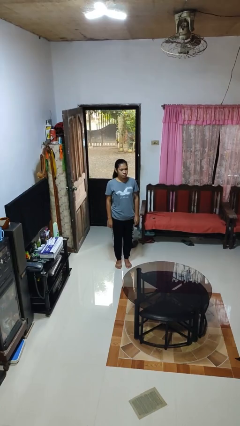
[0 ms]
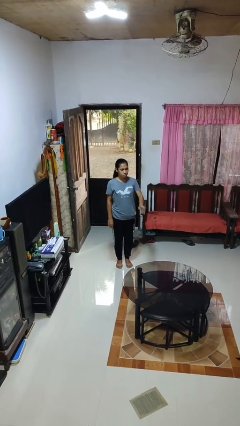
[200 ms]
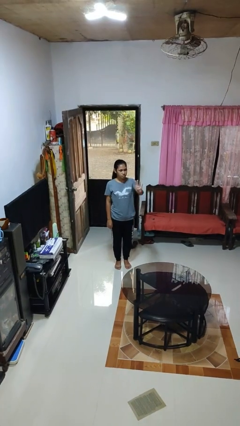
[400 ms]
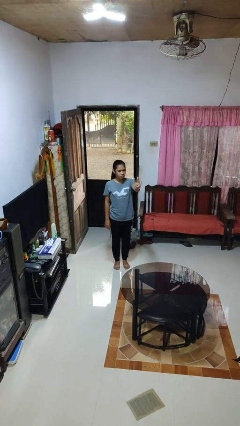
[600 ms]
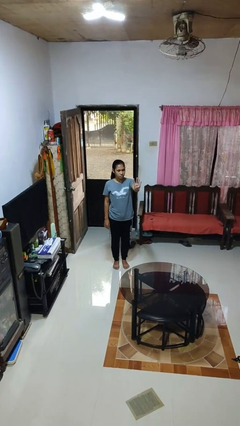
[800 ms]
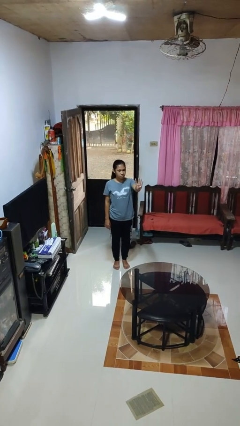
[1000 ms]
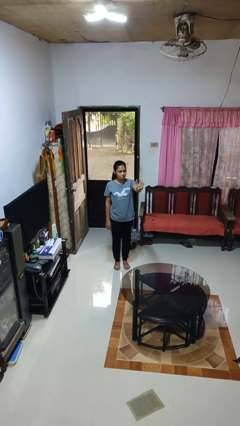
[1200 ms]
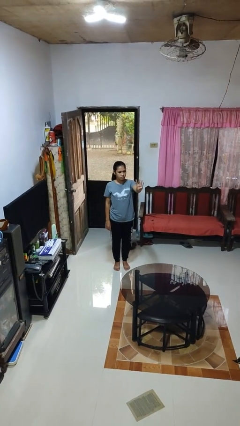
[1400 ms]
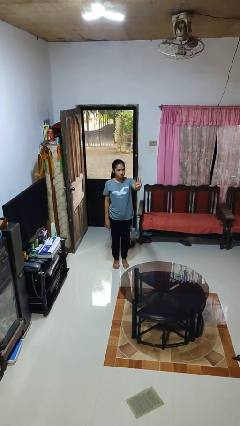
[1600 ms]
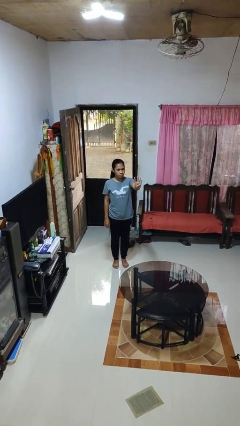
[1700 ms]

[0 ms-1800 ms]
person gestures number four

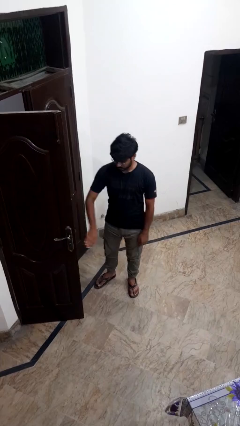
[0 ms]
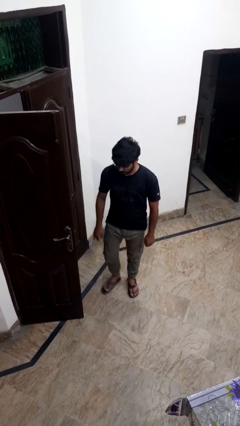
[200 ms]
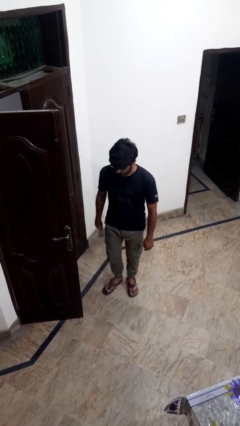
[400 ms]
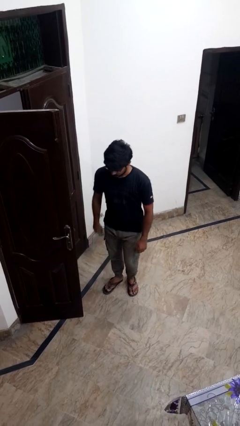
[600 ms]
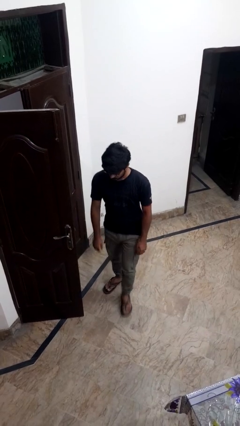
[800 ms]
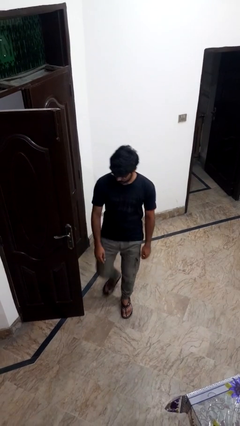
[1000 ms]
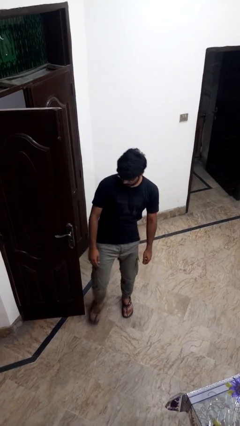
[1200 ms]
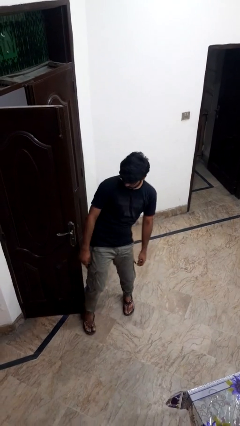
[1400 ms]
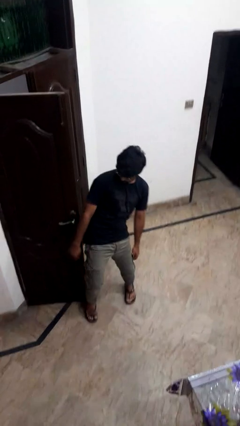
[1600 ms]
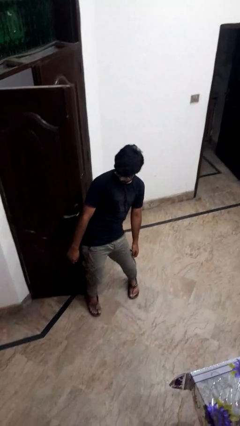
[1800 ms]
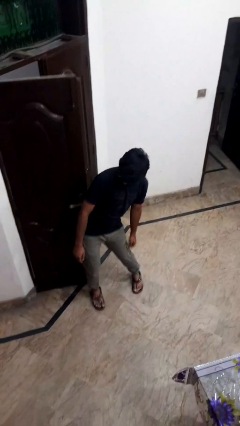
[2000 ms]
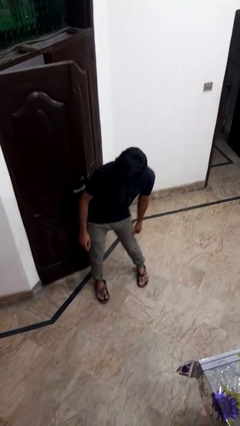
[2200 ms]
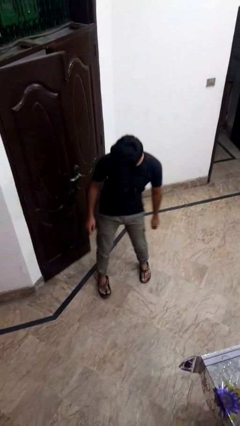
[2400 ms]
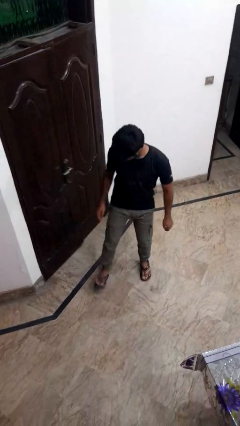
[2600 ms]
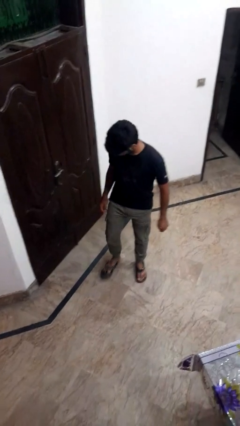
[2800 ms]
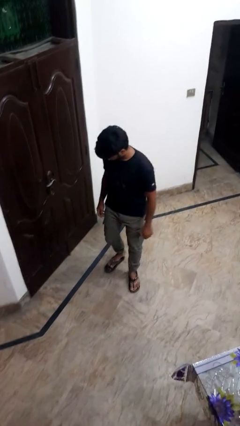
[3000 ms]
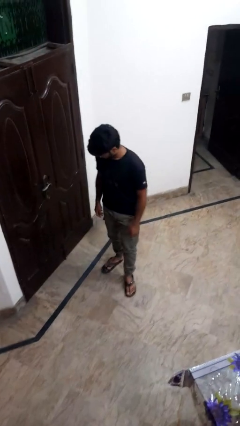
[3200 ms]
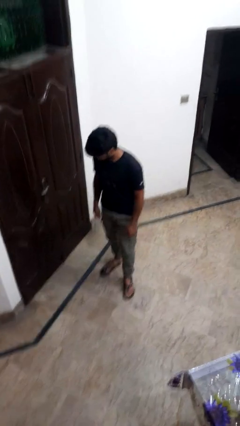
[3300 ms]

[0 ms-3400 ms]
person closes door with hip

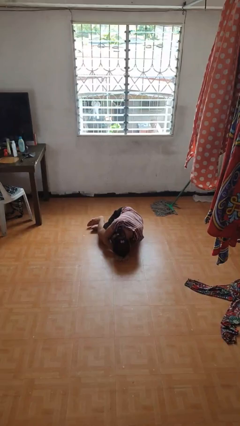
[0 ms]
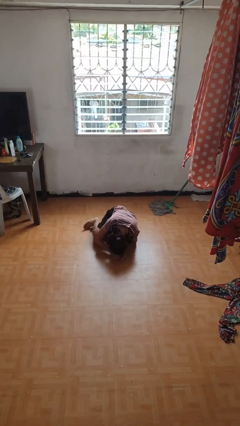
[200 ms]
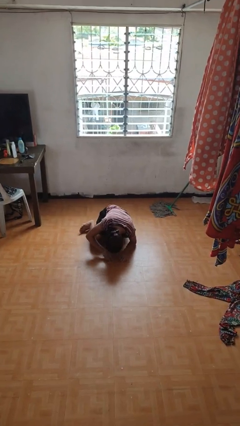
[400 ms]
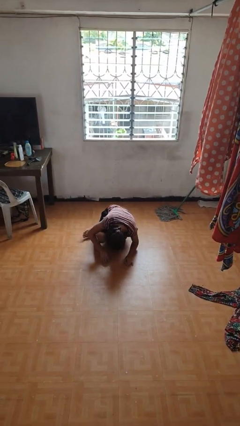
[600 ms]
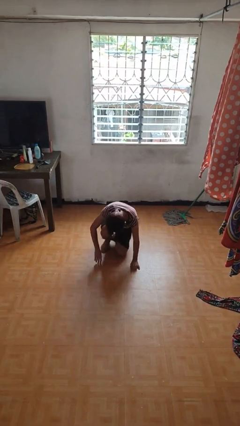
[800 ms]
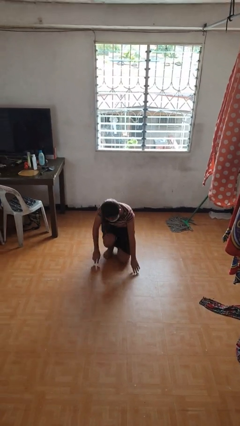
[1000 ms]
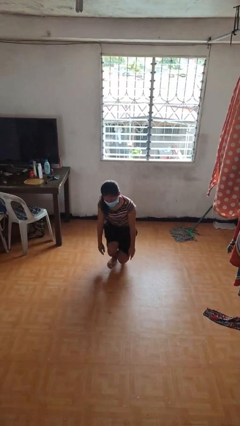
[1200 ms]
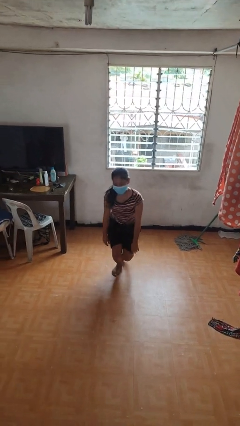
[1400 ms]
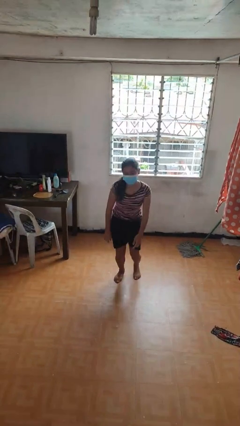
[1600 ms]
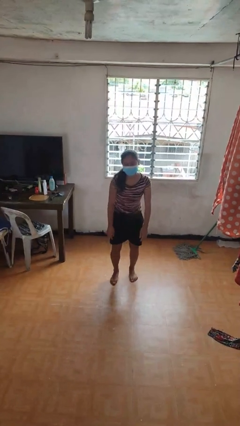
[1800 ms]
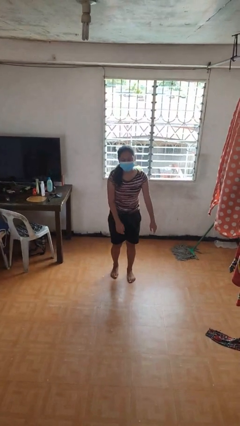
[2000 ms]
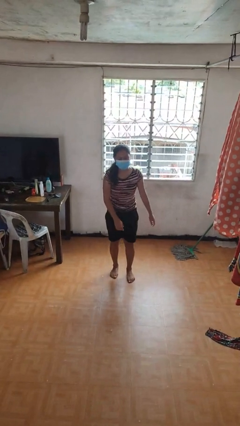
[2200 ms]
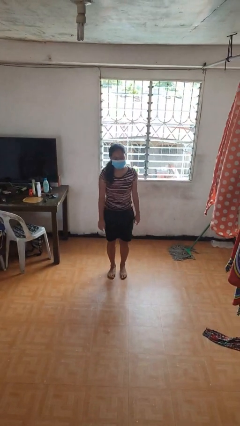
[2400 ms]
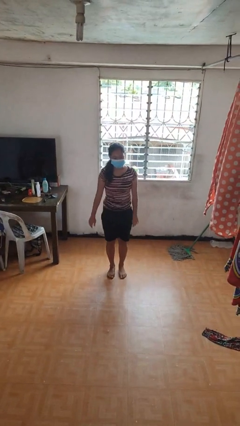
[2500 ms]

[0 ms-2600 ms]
person stands up from floor

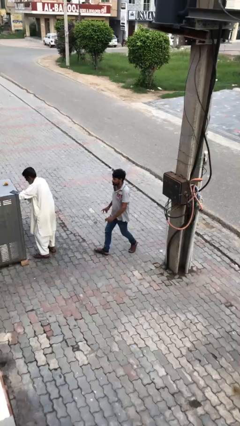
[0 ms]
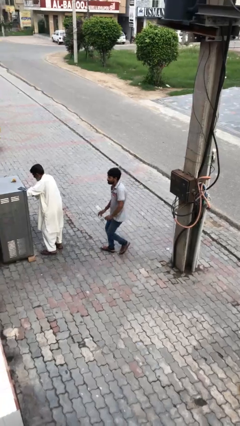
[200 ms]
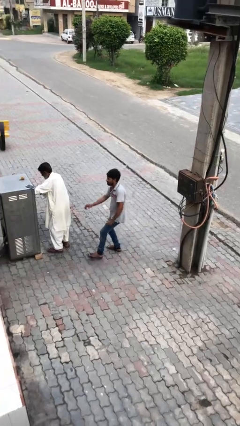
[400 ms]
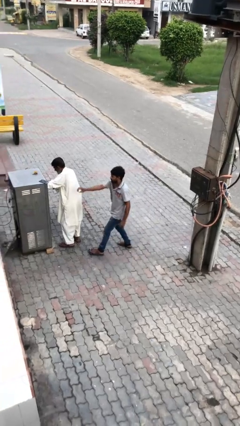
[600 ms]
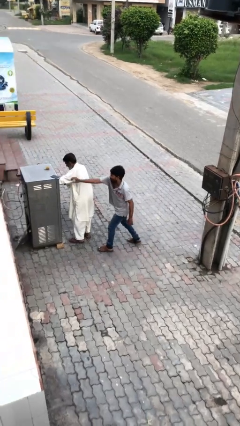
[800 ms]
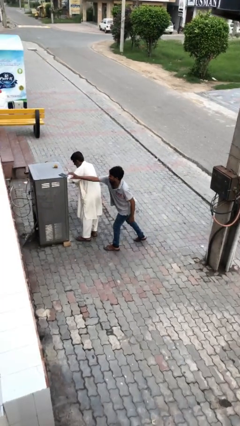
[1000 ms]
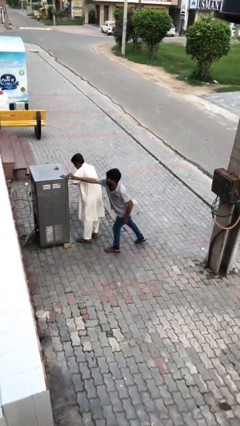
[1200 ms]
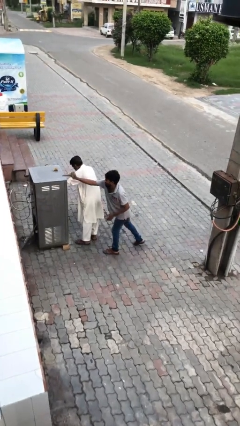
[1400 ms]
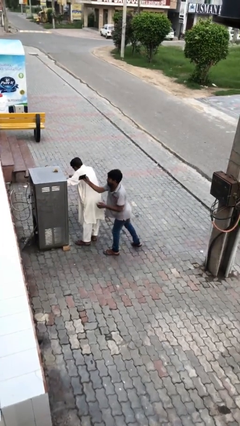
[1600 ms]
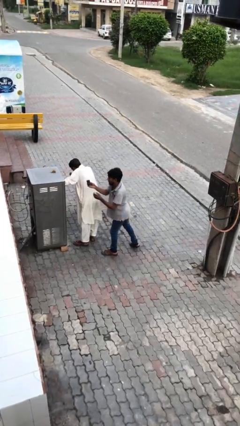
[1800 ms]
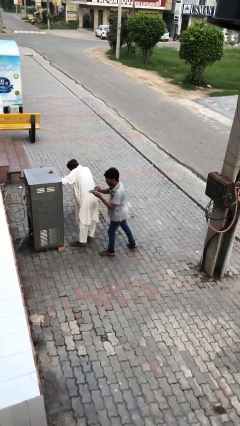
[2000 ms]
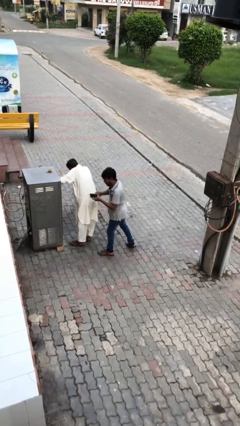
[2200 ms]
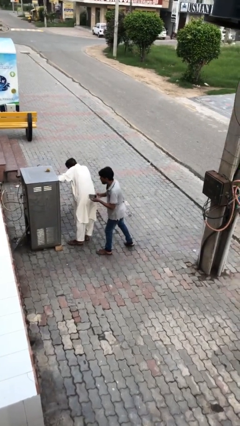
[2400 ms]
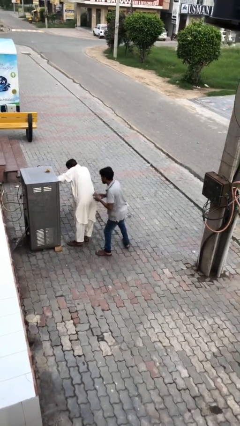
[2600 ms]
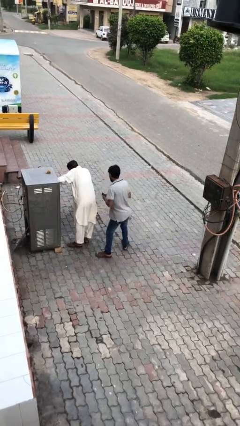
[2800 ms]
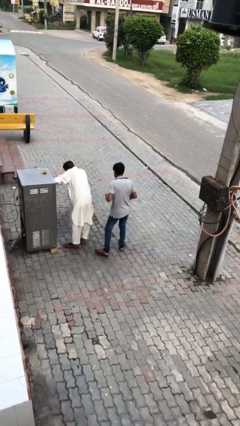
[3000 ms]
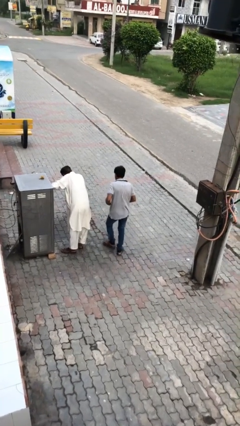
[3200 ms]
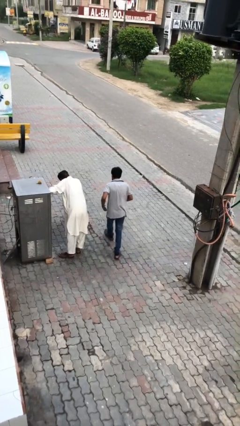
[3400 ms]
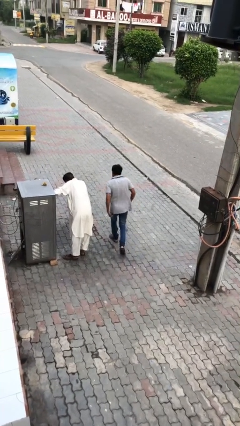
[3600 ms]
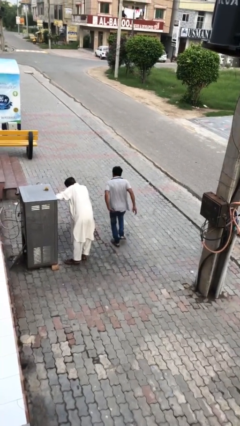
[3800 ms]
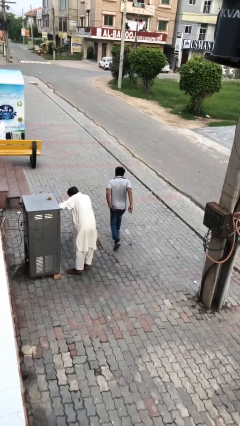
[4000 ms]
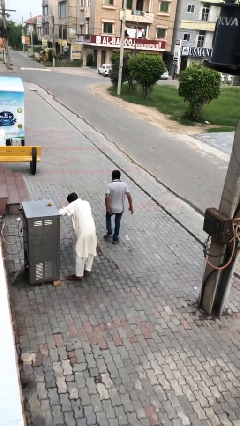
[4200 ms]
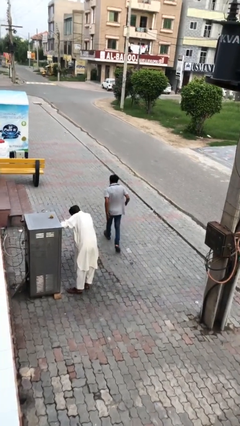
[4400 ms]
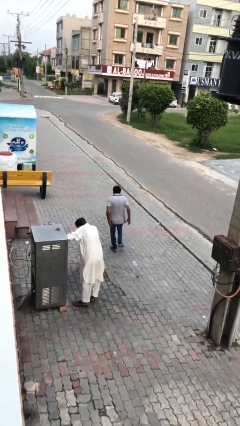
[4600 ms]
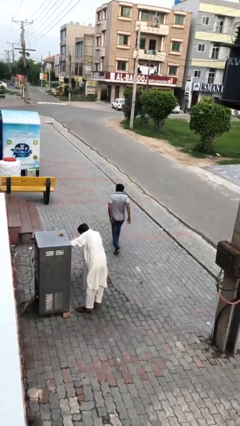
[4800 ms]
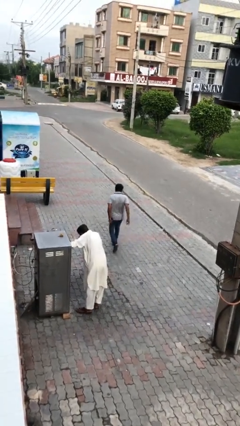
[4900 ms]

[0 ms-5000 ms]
person steals object from person

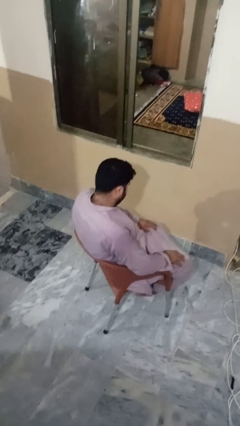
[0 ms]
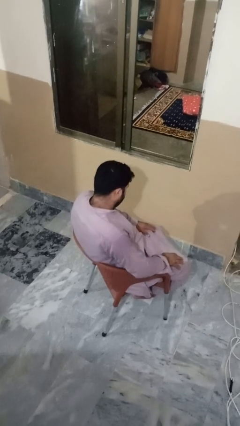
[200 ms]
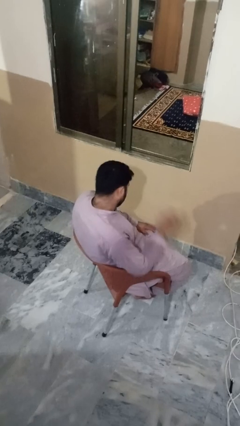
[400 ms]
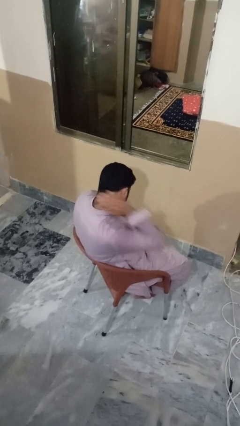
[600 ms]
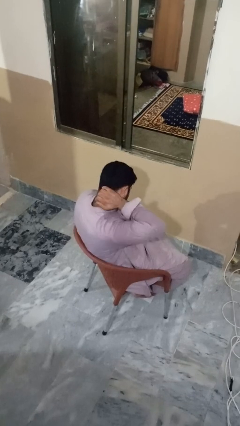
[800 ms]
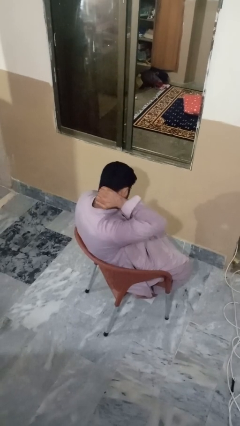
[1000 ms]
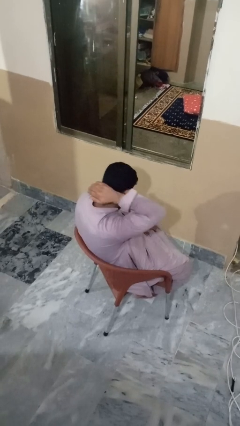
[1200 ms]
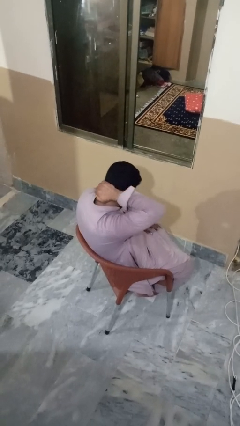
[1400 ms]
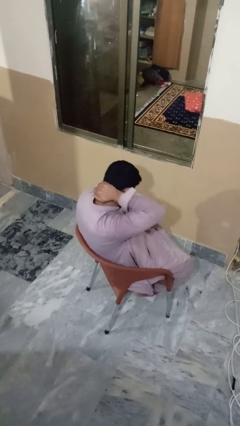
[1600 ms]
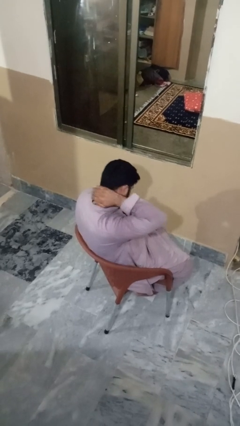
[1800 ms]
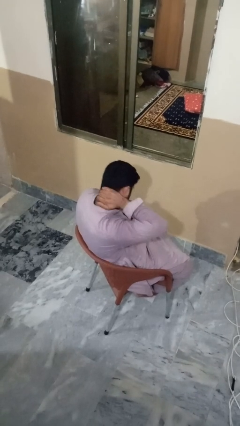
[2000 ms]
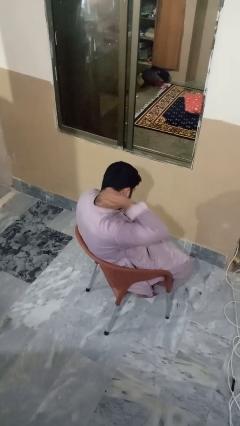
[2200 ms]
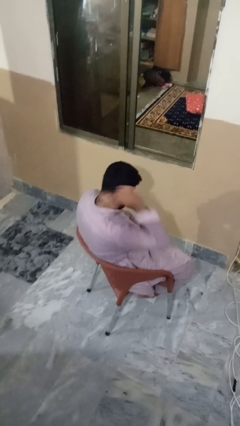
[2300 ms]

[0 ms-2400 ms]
person rubs neck

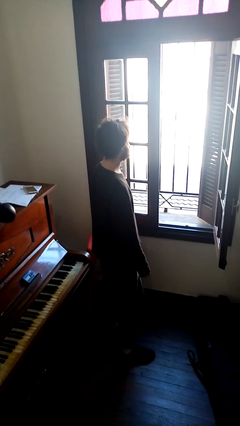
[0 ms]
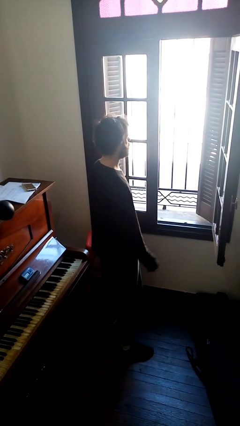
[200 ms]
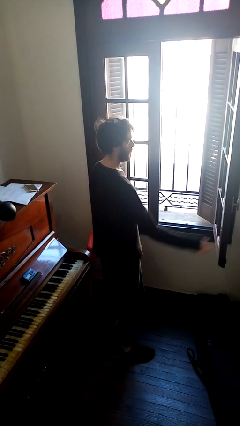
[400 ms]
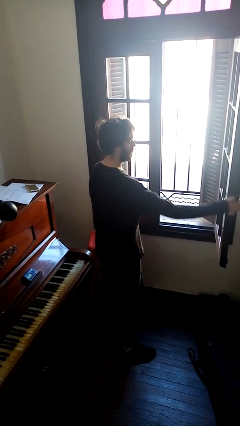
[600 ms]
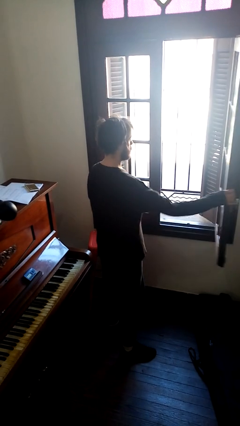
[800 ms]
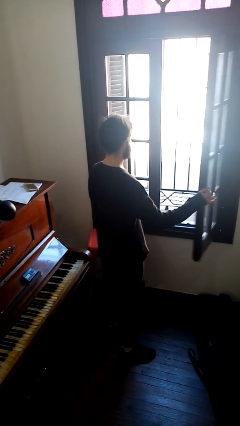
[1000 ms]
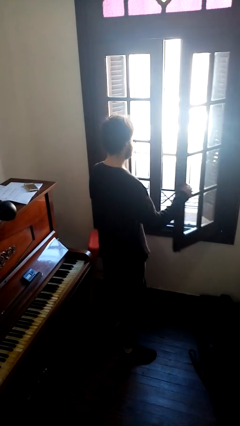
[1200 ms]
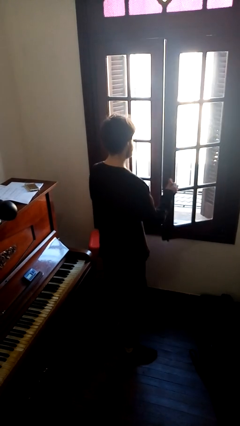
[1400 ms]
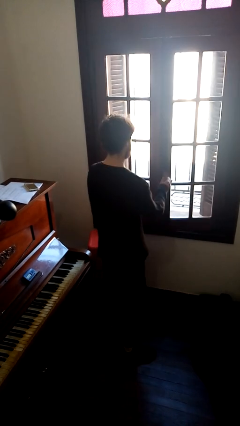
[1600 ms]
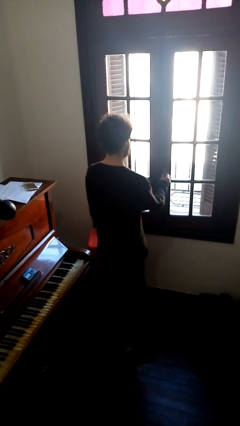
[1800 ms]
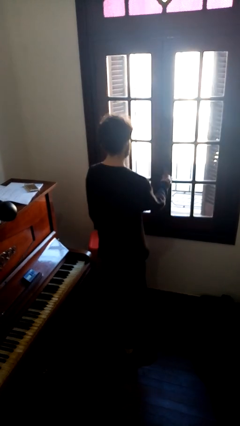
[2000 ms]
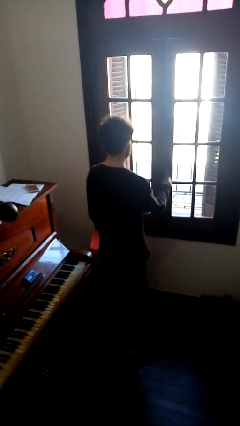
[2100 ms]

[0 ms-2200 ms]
person closes home window
